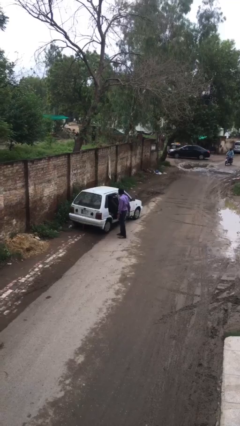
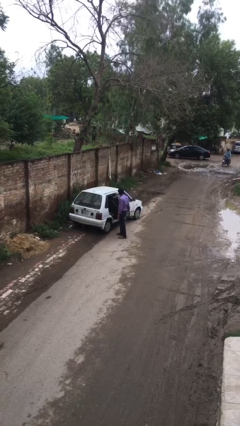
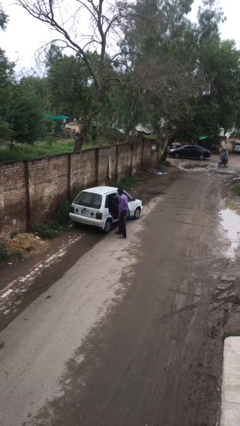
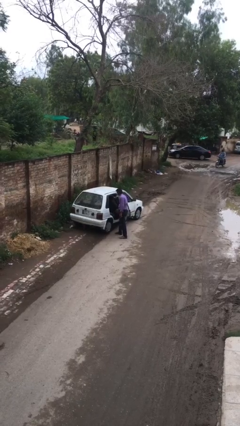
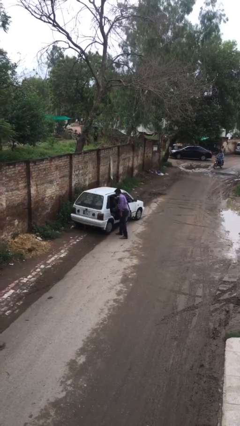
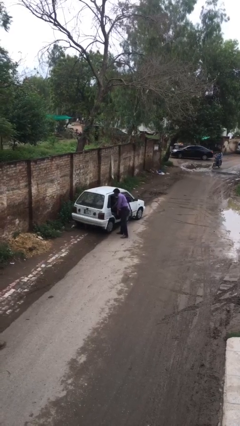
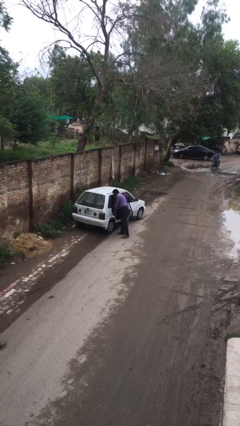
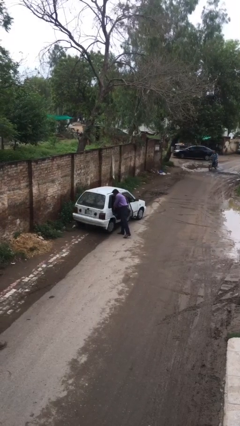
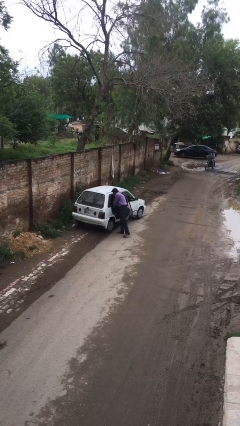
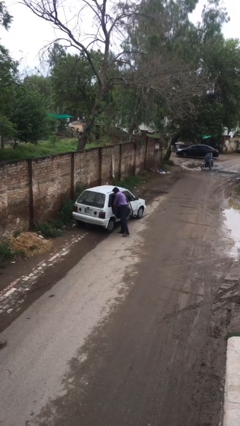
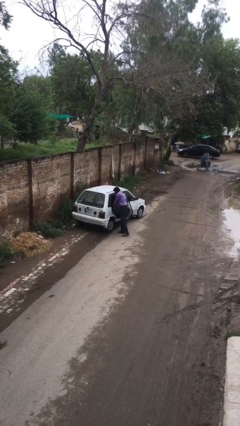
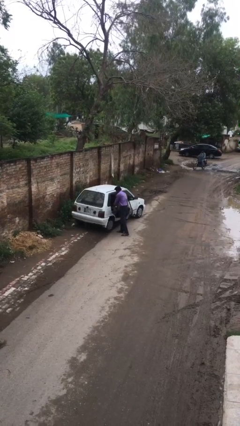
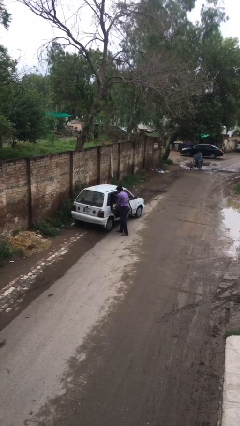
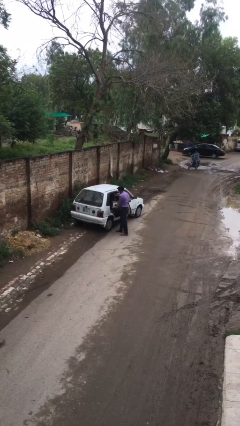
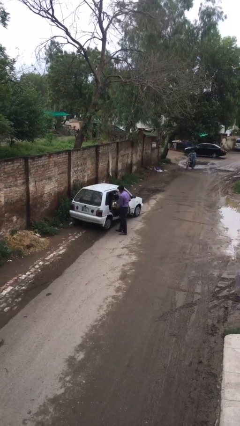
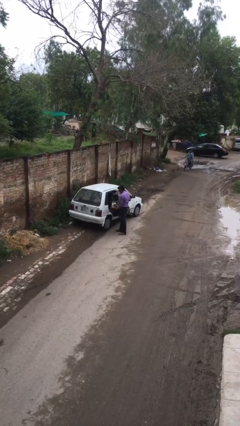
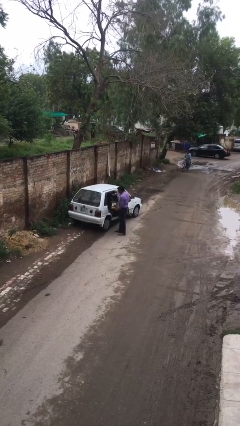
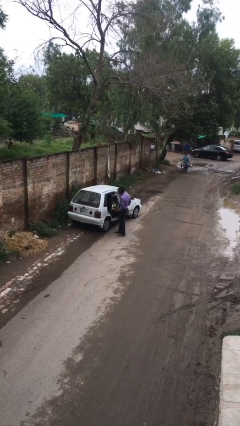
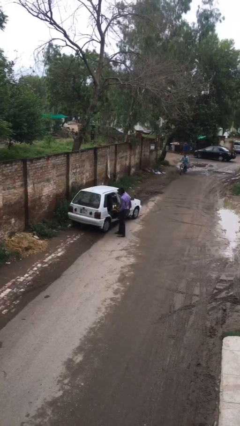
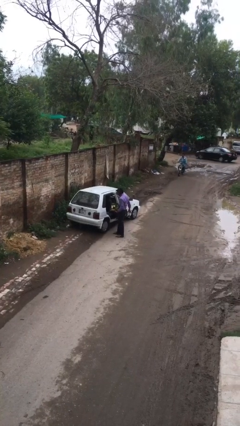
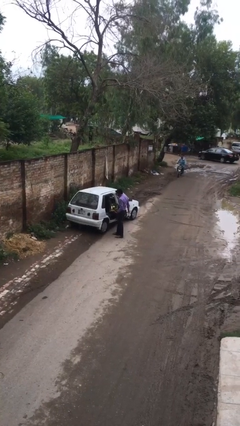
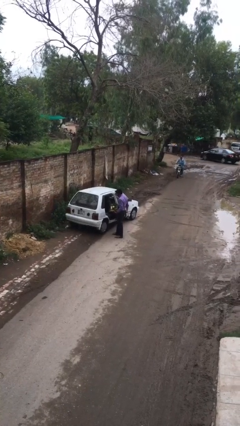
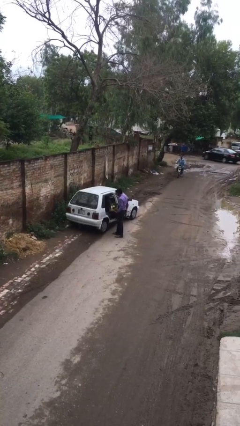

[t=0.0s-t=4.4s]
person unloads car

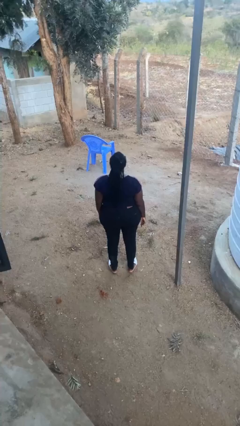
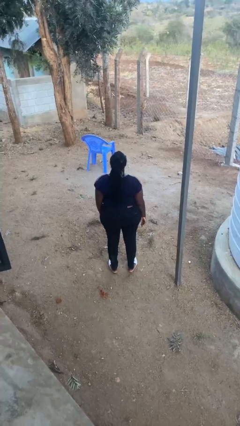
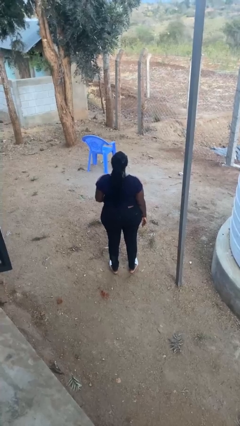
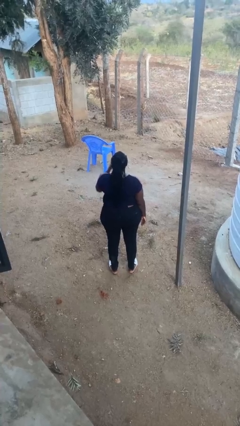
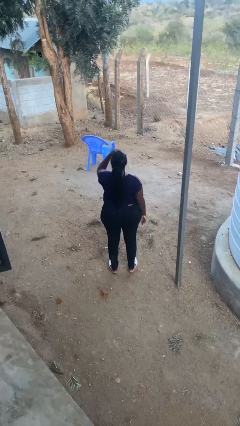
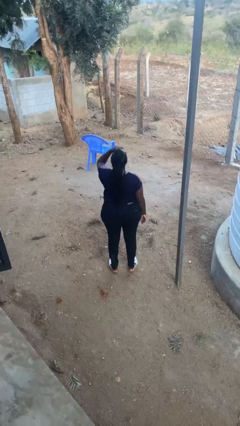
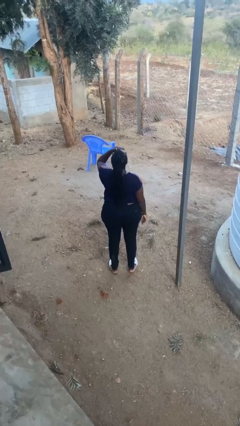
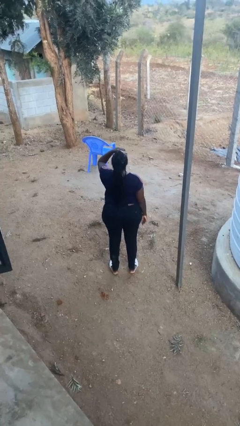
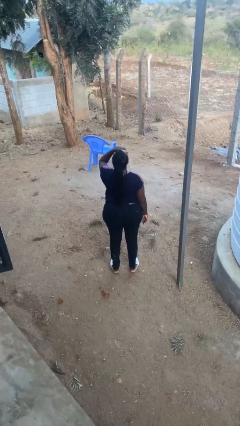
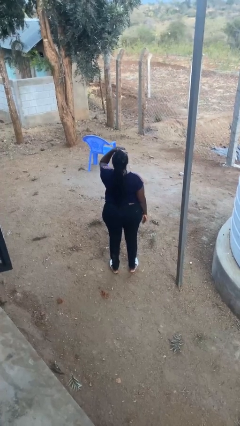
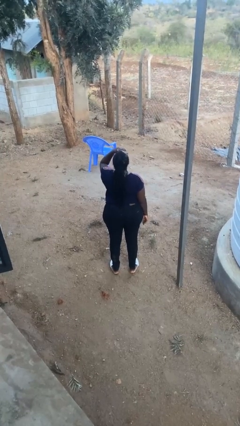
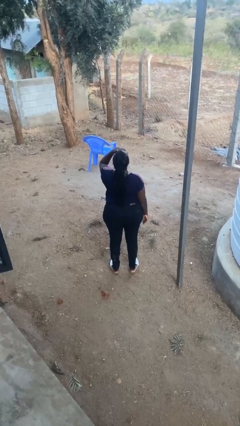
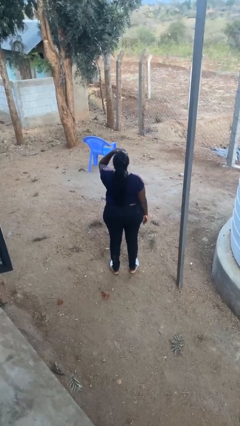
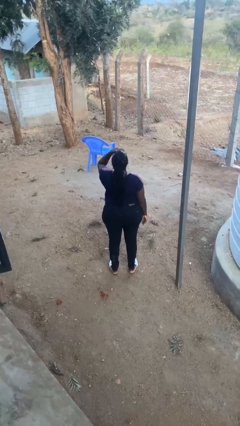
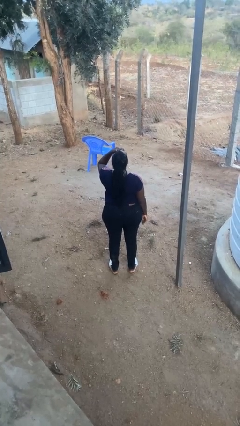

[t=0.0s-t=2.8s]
person shades eyes

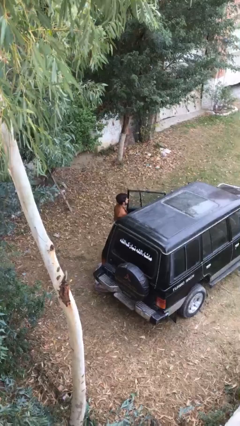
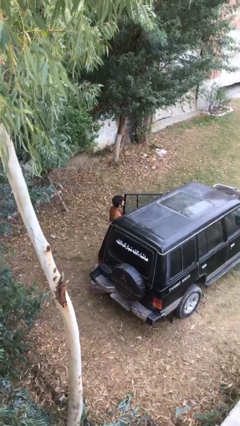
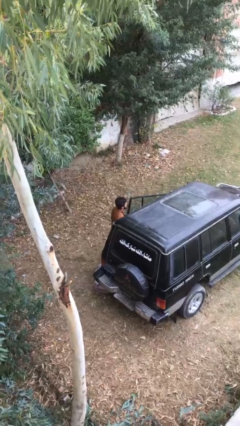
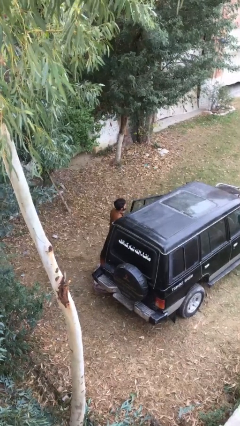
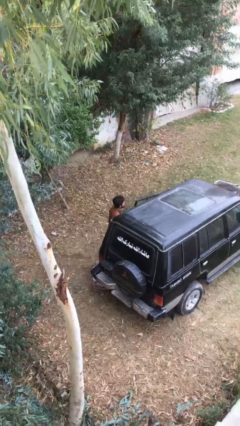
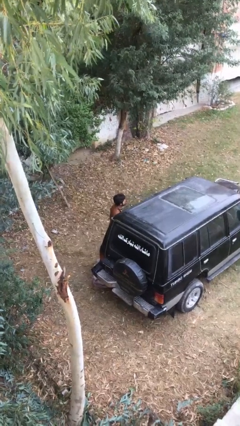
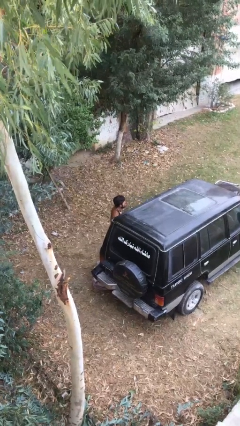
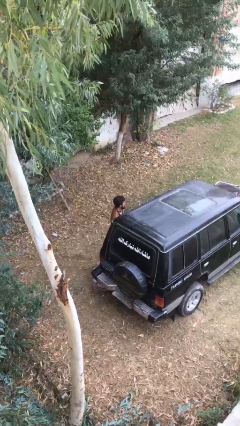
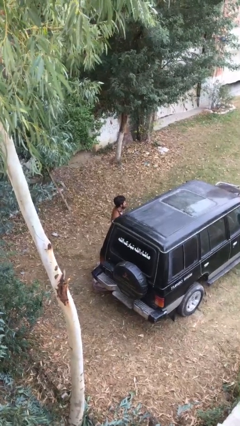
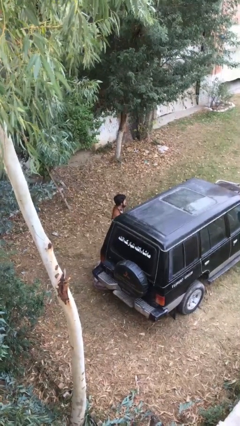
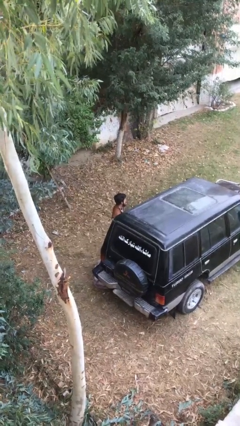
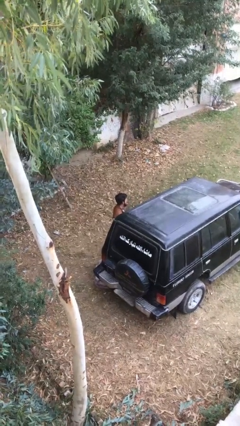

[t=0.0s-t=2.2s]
person closes car door

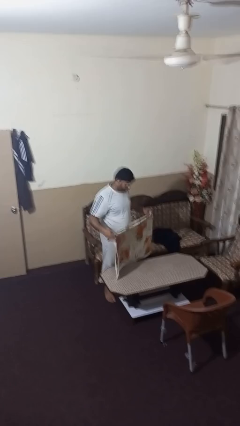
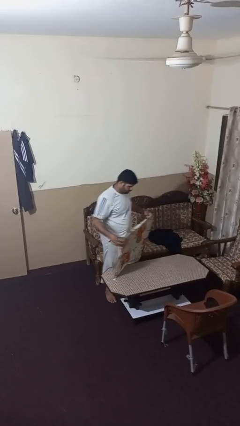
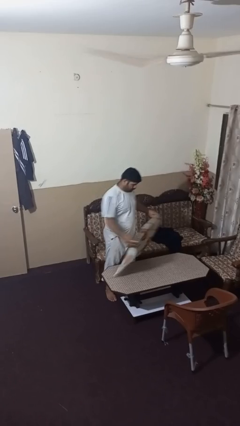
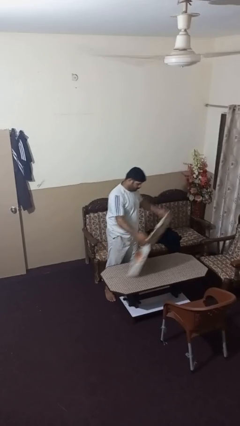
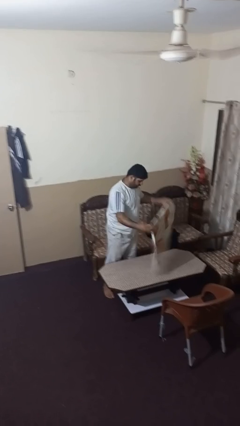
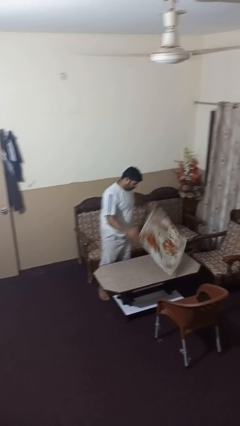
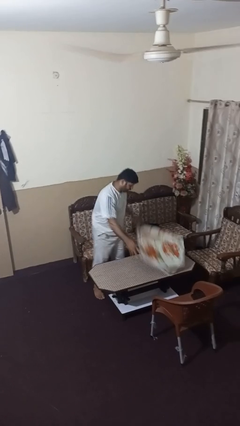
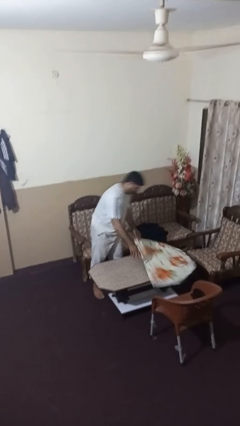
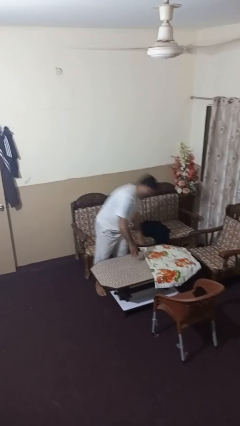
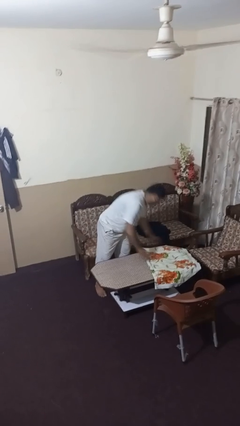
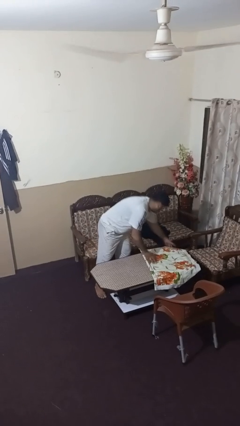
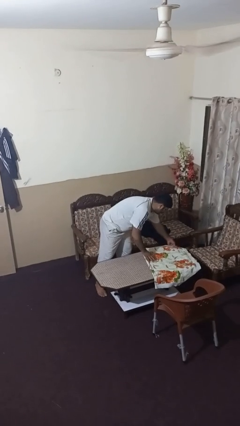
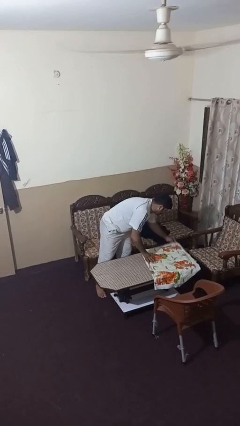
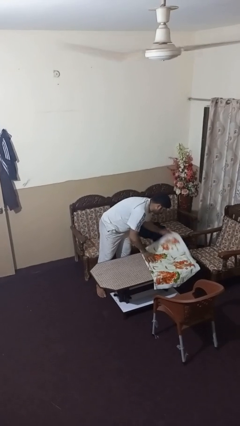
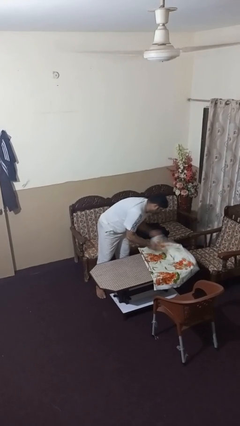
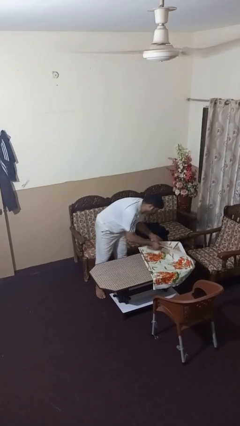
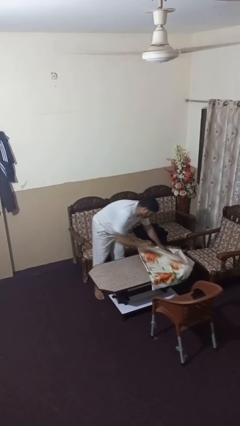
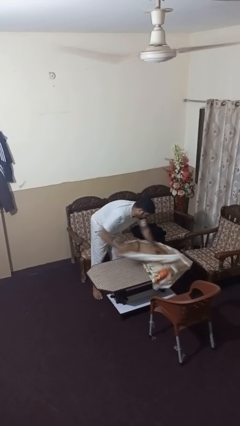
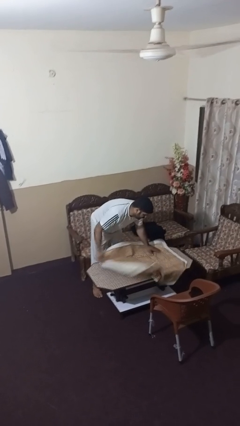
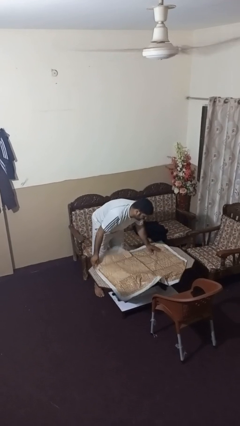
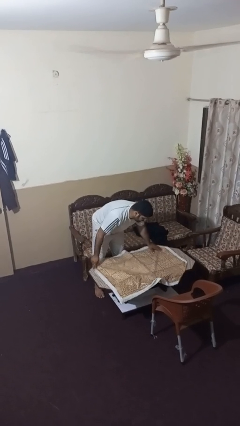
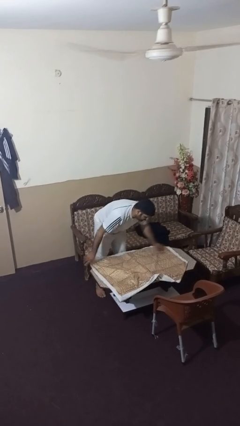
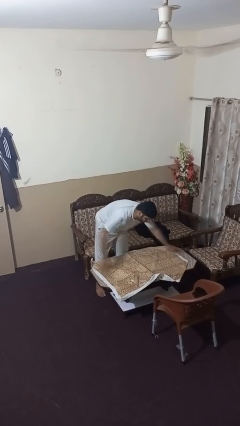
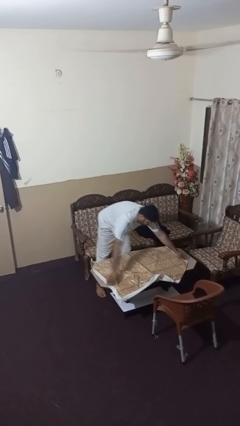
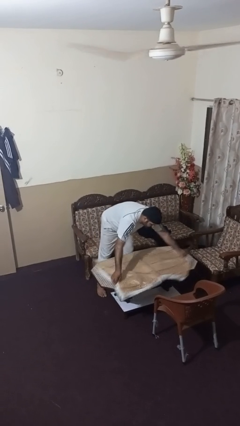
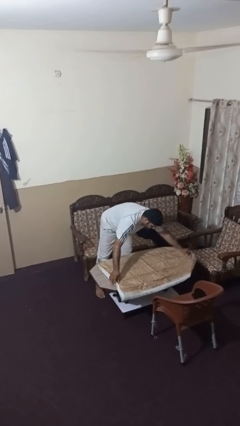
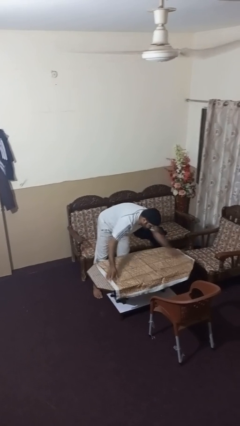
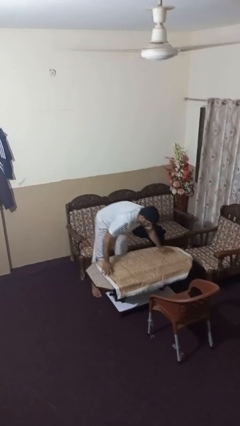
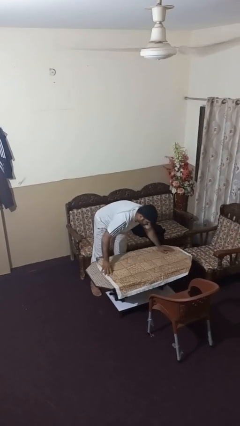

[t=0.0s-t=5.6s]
person spreads tablecloth

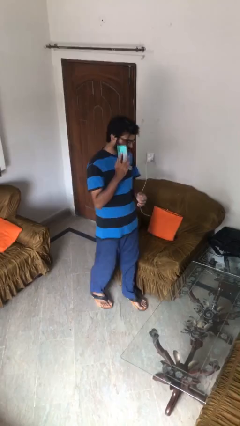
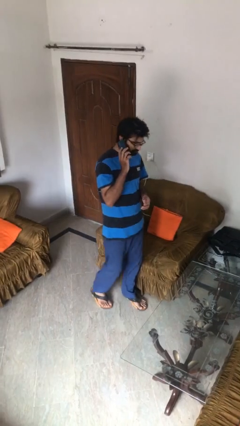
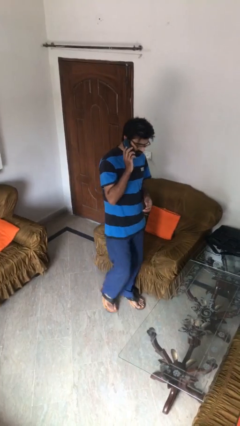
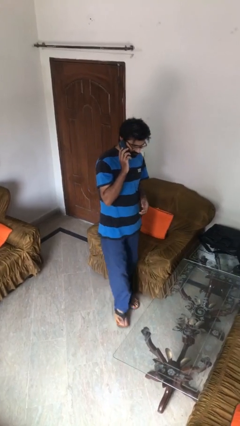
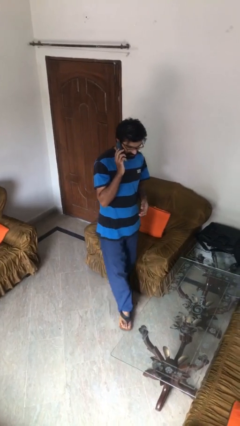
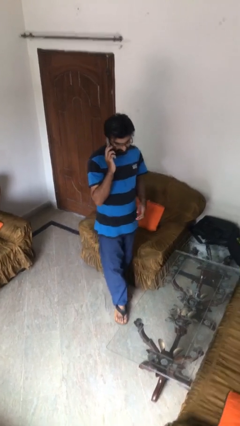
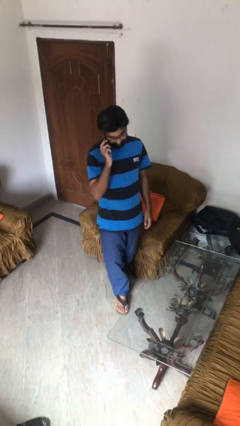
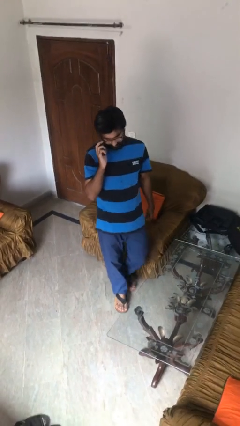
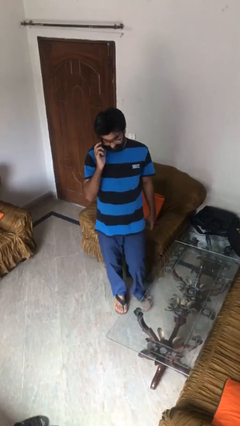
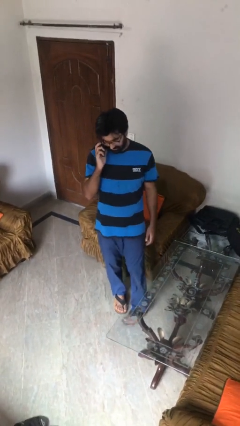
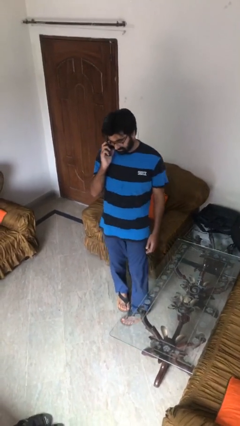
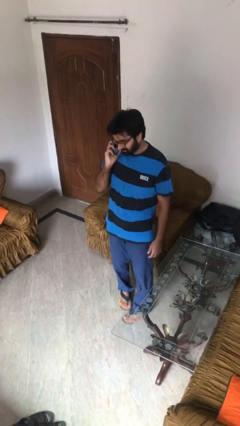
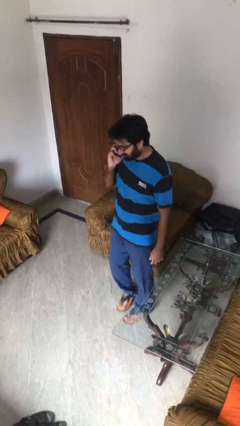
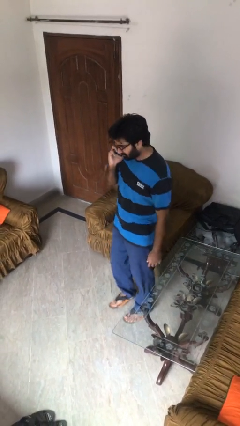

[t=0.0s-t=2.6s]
person talks on phone
